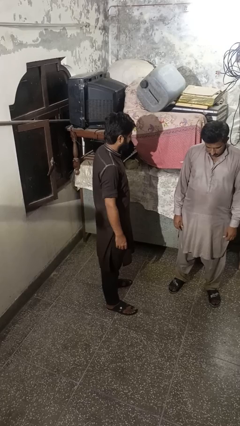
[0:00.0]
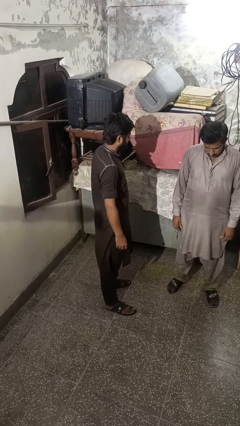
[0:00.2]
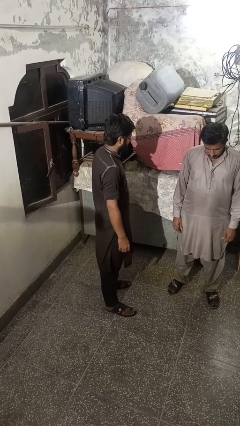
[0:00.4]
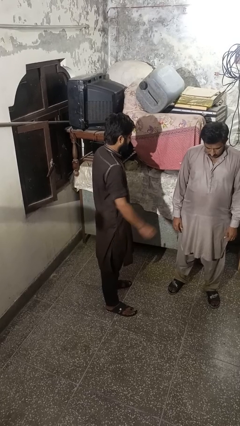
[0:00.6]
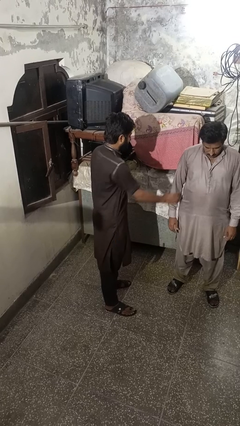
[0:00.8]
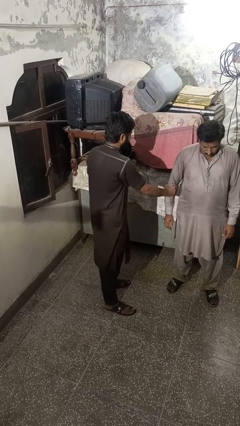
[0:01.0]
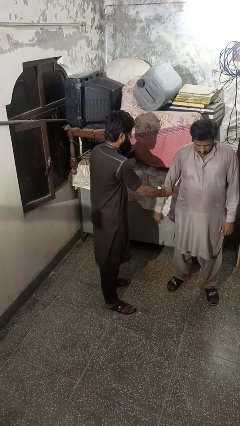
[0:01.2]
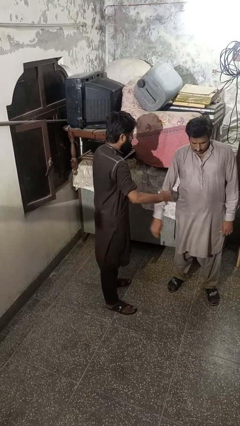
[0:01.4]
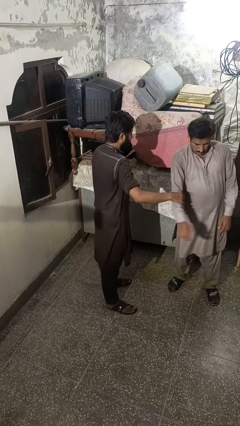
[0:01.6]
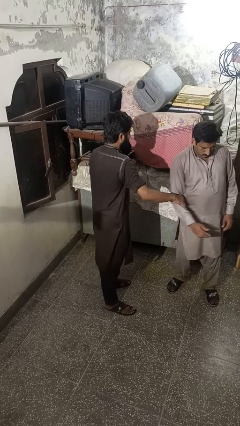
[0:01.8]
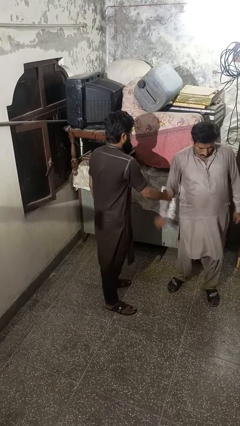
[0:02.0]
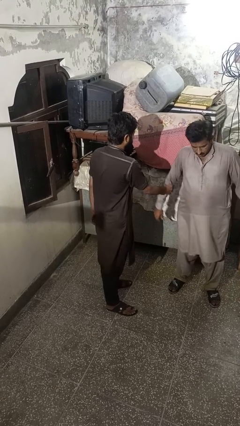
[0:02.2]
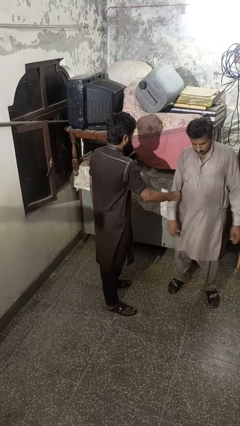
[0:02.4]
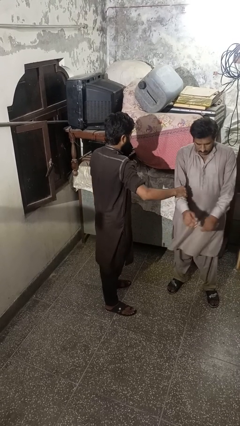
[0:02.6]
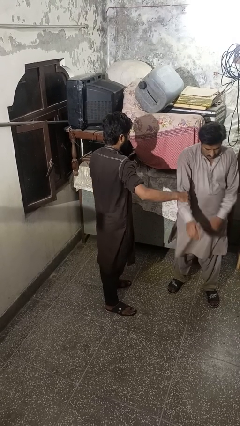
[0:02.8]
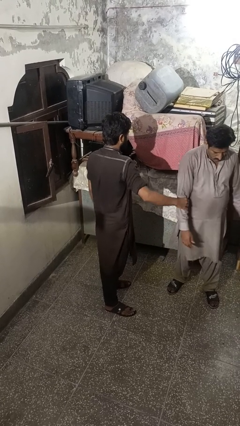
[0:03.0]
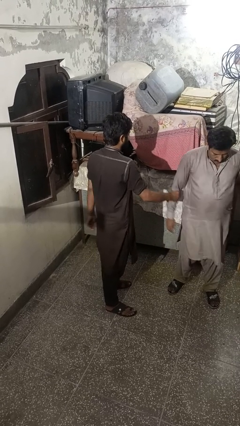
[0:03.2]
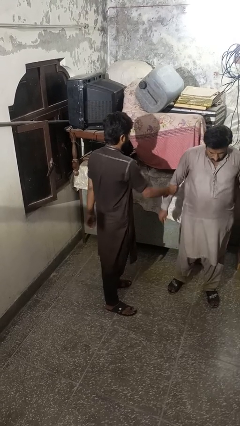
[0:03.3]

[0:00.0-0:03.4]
person grabs person by forearm

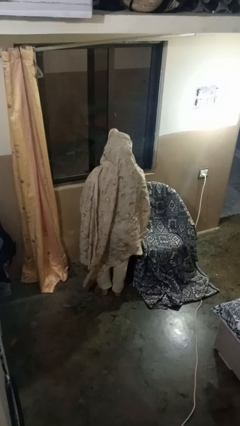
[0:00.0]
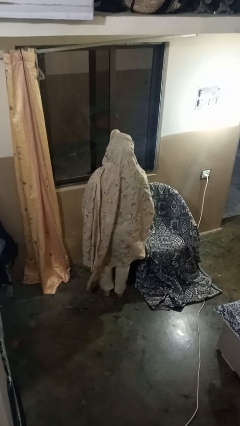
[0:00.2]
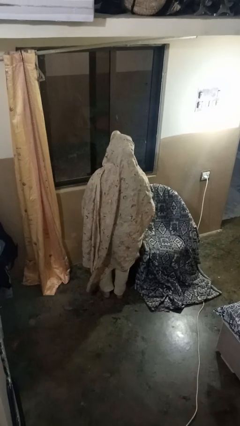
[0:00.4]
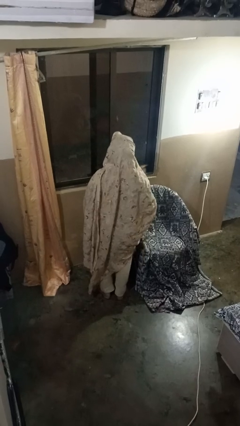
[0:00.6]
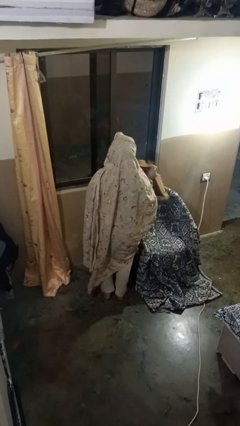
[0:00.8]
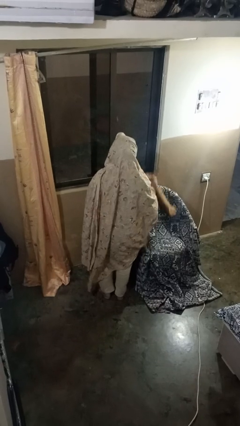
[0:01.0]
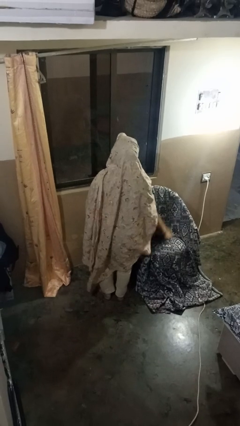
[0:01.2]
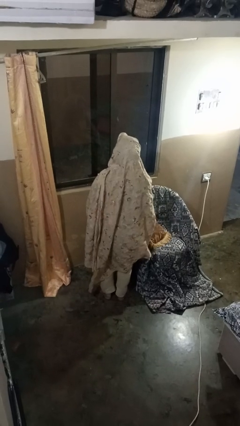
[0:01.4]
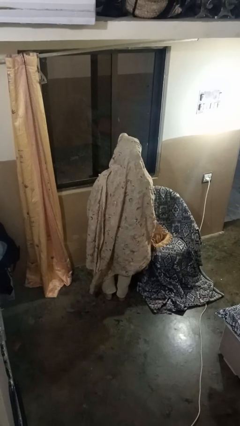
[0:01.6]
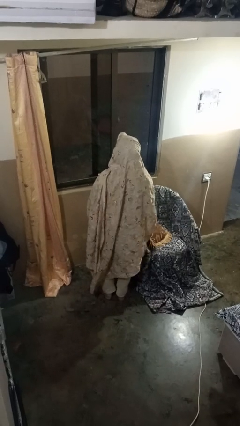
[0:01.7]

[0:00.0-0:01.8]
person puts down object on couch

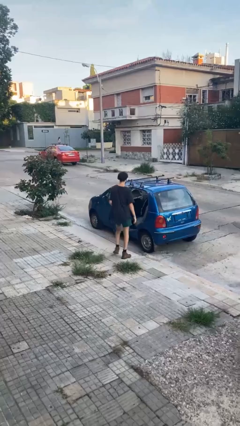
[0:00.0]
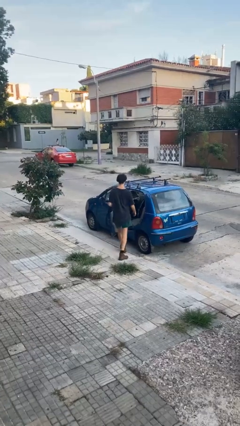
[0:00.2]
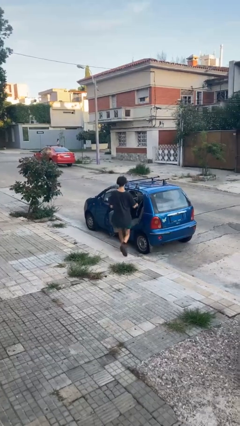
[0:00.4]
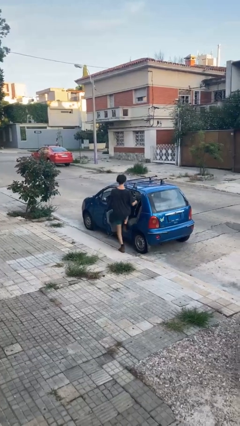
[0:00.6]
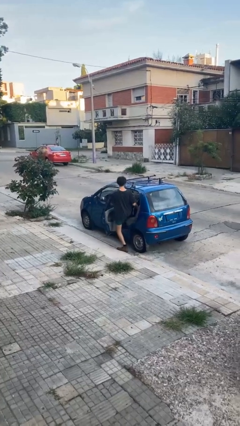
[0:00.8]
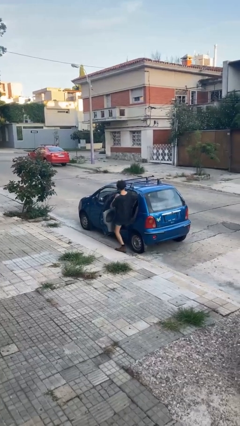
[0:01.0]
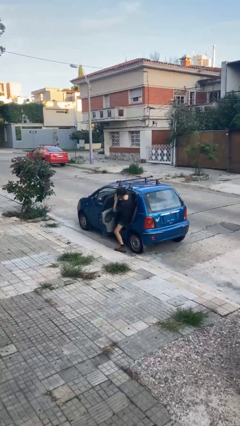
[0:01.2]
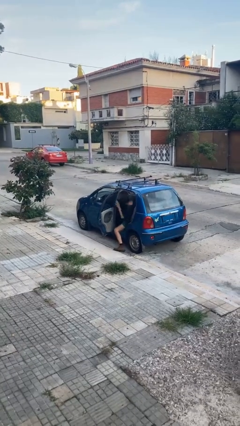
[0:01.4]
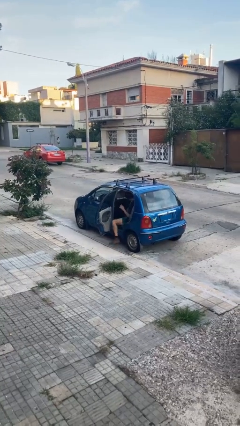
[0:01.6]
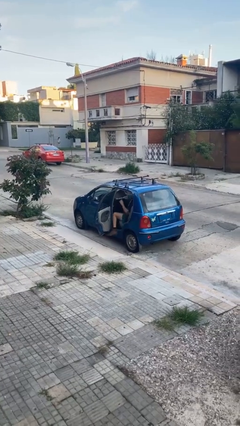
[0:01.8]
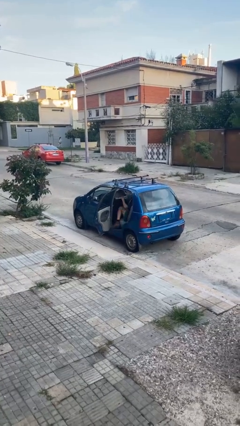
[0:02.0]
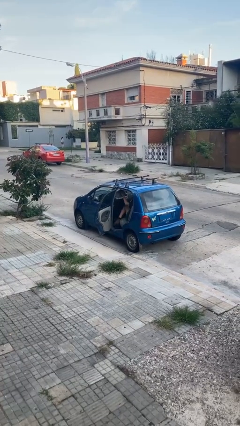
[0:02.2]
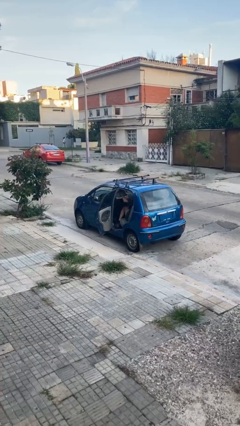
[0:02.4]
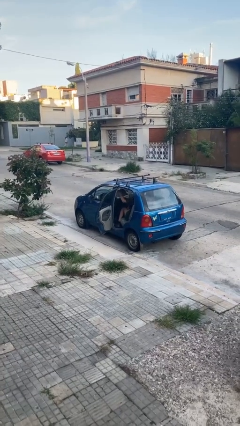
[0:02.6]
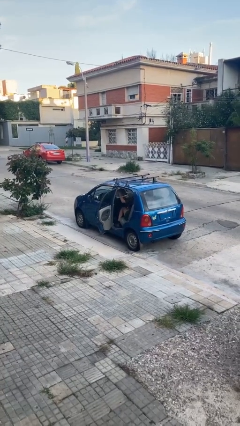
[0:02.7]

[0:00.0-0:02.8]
person enters car

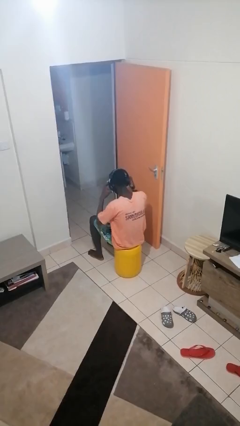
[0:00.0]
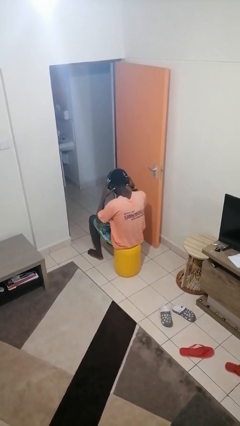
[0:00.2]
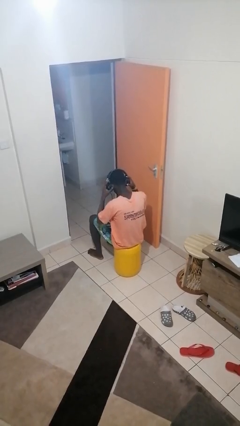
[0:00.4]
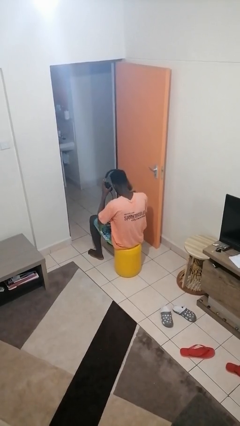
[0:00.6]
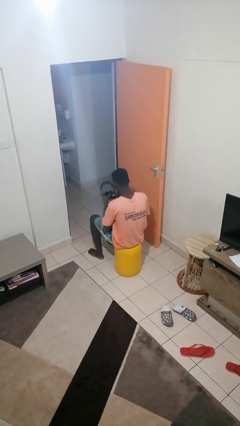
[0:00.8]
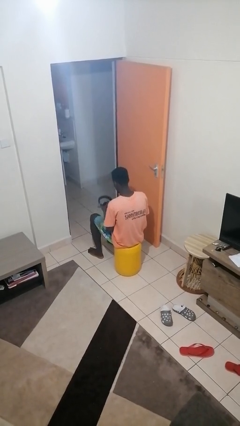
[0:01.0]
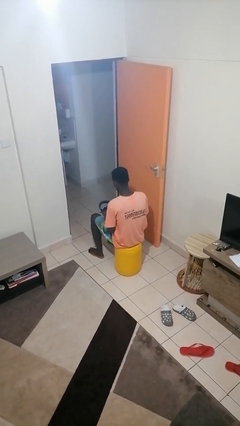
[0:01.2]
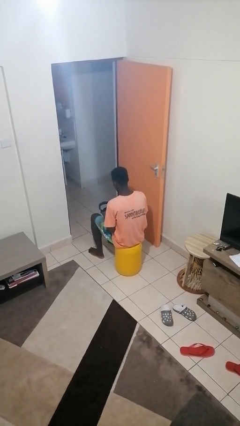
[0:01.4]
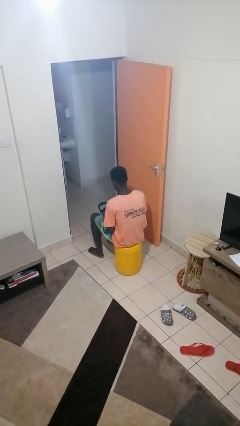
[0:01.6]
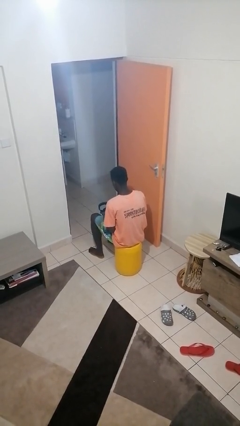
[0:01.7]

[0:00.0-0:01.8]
person takes off headphones

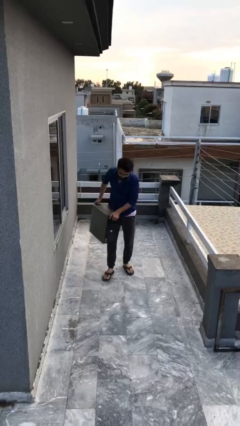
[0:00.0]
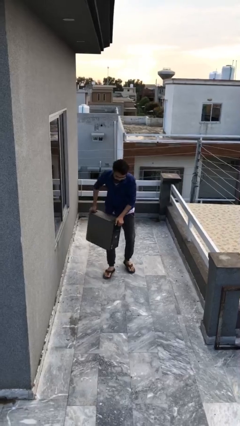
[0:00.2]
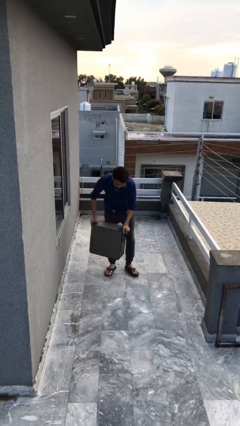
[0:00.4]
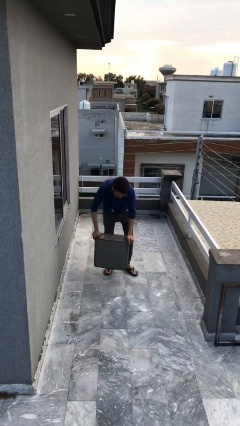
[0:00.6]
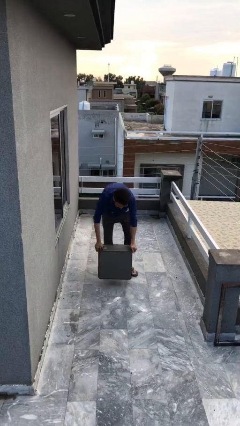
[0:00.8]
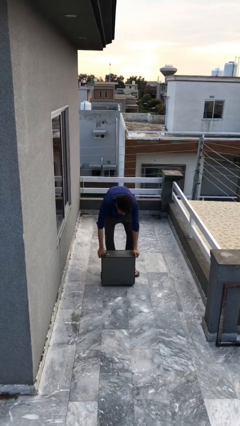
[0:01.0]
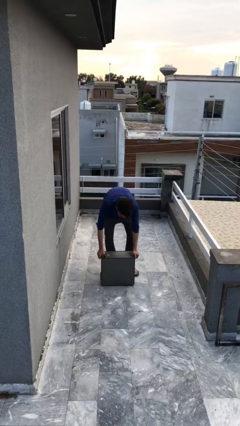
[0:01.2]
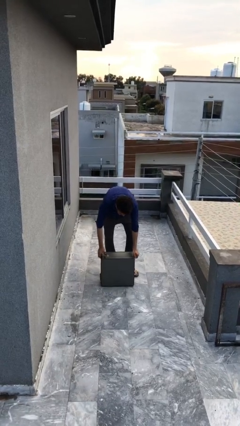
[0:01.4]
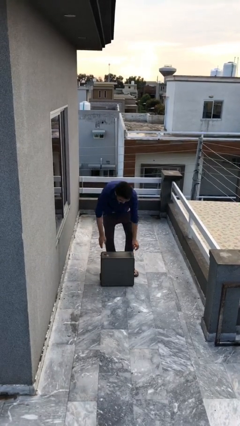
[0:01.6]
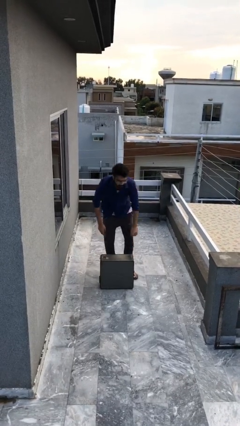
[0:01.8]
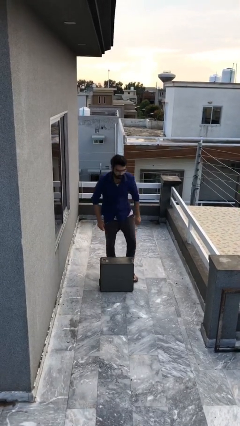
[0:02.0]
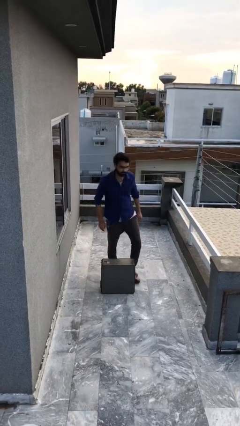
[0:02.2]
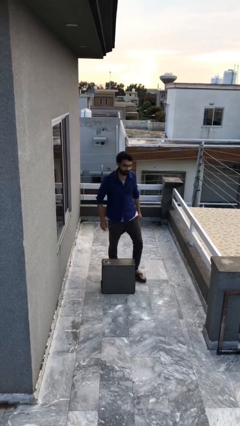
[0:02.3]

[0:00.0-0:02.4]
person puts down object on floor

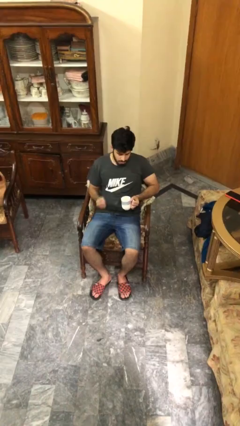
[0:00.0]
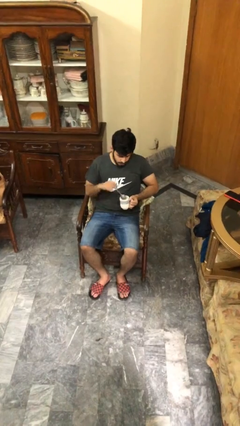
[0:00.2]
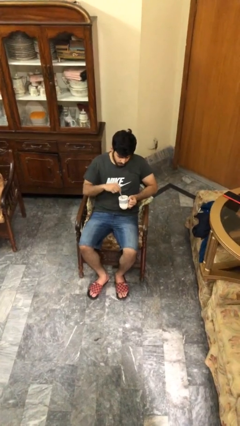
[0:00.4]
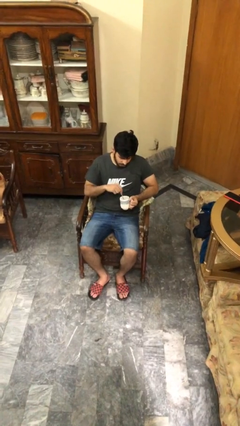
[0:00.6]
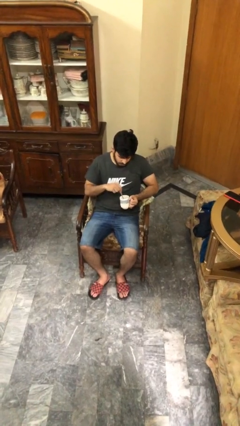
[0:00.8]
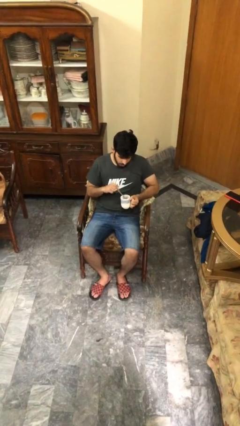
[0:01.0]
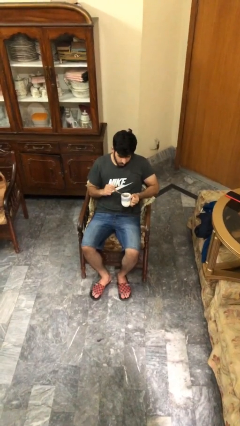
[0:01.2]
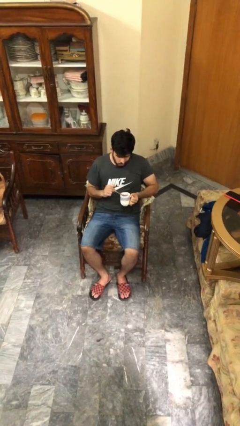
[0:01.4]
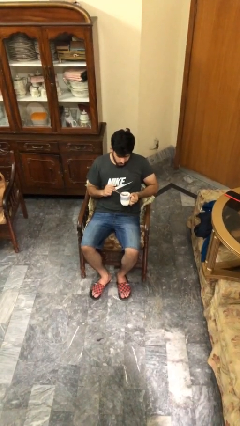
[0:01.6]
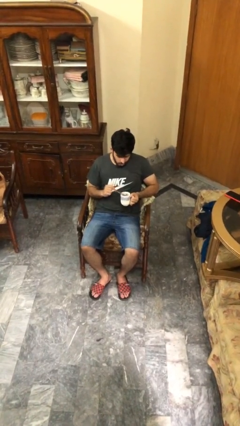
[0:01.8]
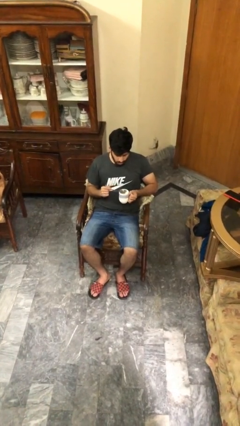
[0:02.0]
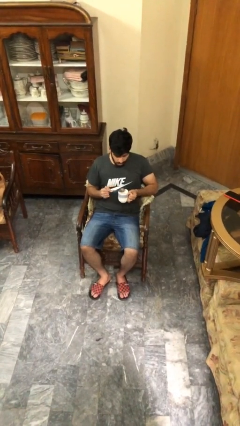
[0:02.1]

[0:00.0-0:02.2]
person stirs mug

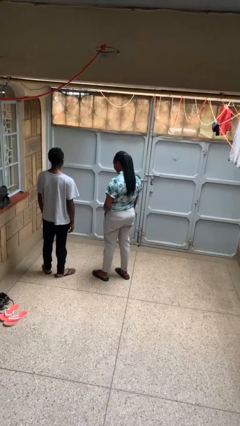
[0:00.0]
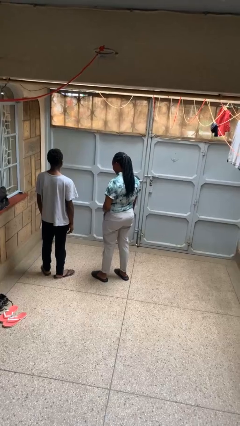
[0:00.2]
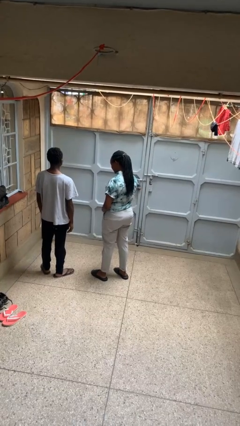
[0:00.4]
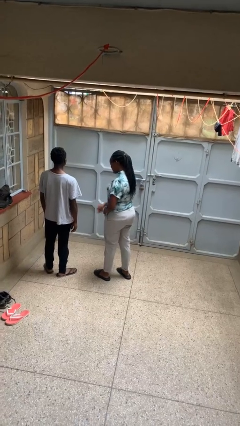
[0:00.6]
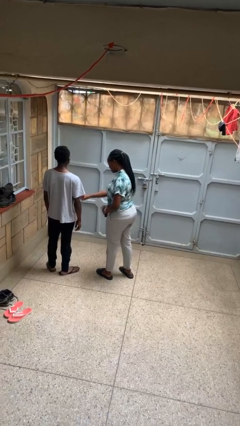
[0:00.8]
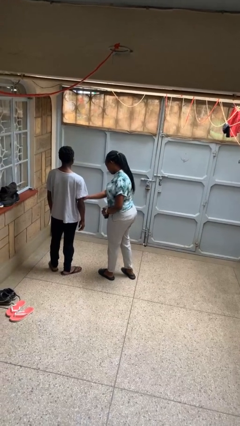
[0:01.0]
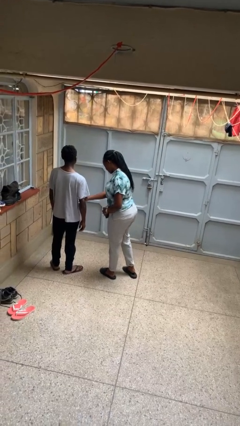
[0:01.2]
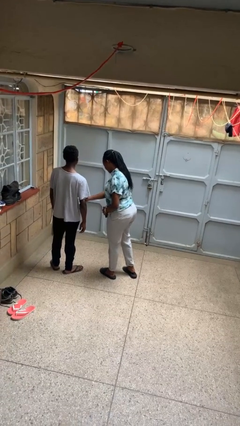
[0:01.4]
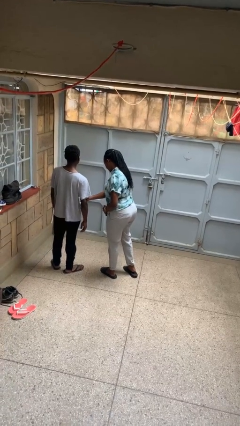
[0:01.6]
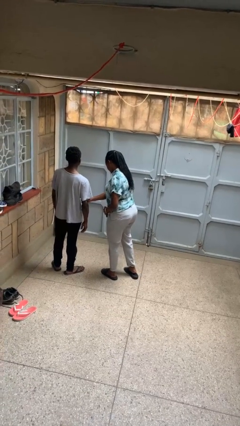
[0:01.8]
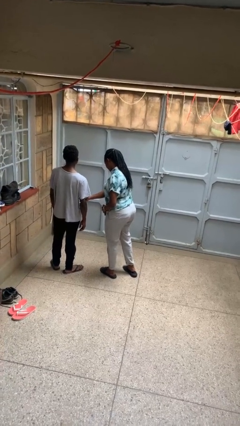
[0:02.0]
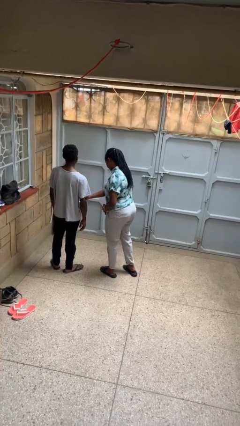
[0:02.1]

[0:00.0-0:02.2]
person grabs person by bicep

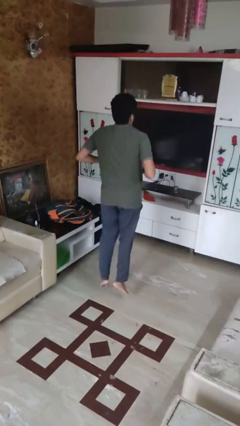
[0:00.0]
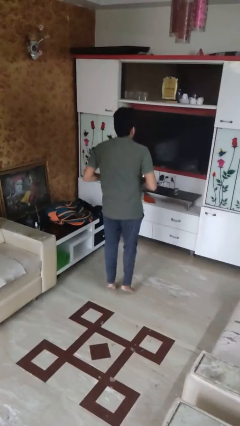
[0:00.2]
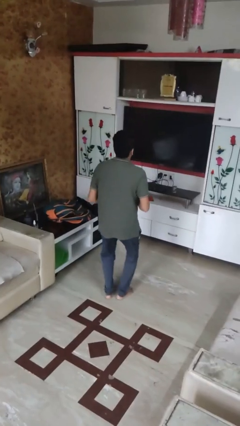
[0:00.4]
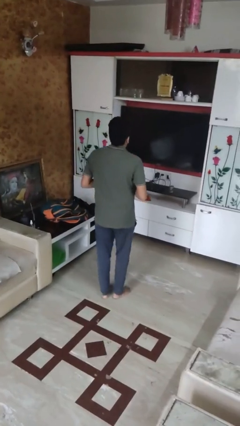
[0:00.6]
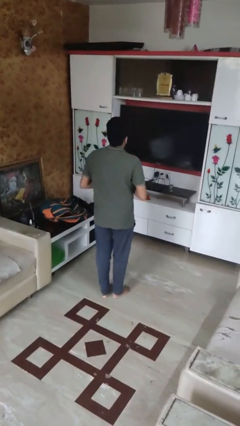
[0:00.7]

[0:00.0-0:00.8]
person jumps
